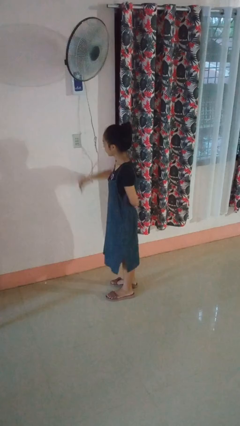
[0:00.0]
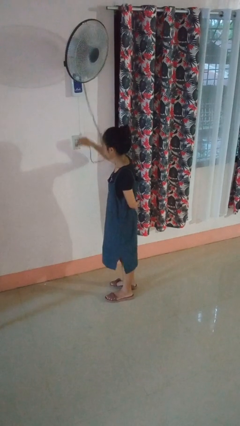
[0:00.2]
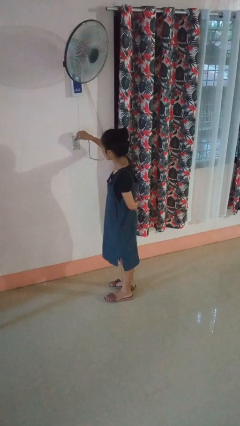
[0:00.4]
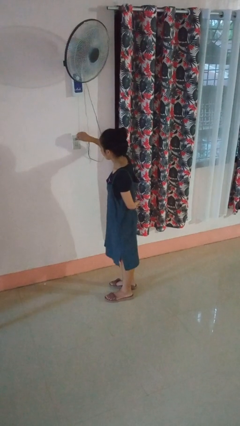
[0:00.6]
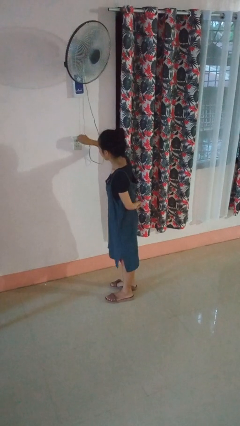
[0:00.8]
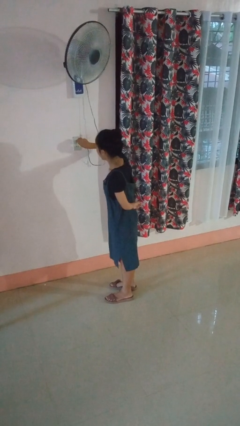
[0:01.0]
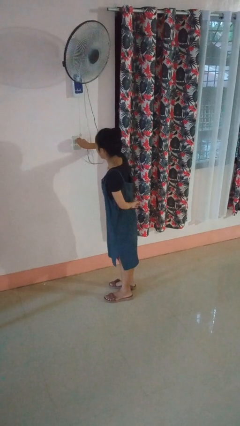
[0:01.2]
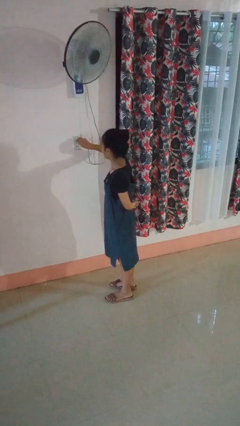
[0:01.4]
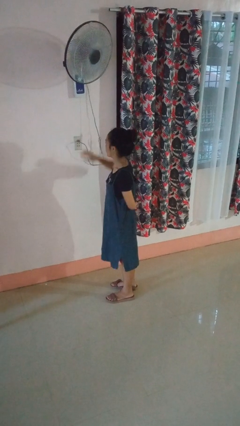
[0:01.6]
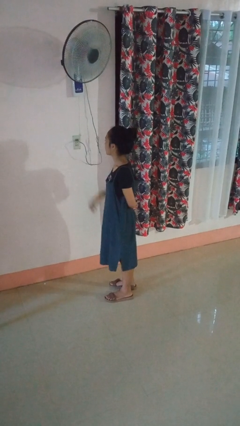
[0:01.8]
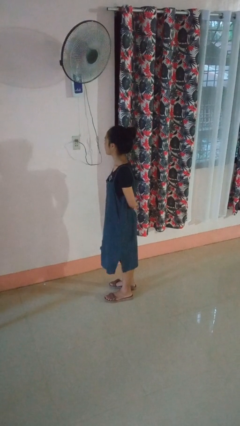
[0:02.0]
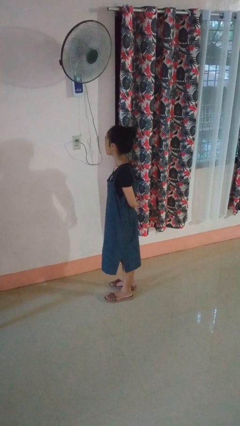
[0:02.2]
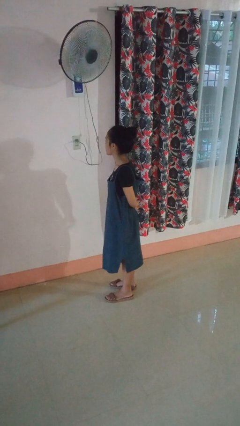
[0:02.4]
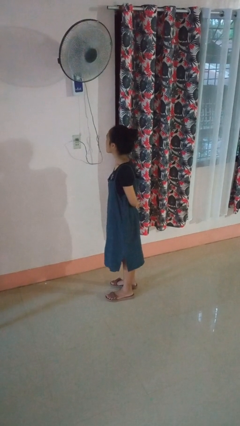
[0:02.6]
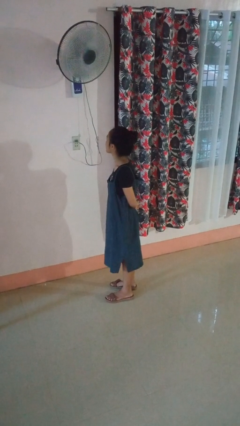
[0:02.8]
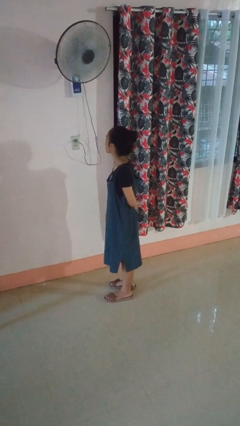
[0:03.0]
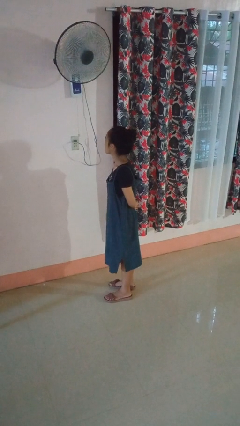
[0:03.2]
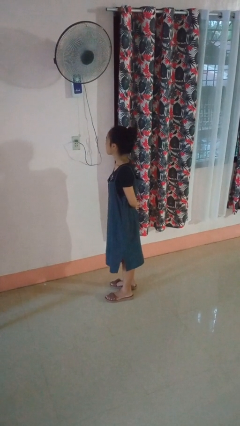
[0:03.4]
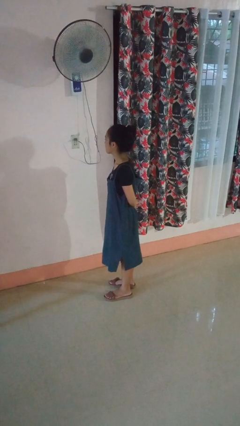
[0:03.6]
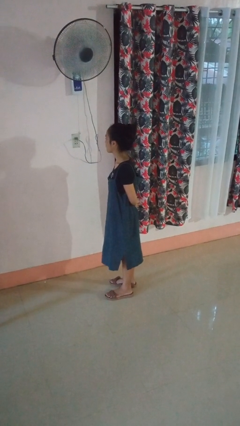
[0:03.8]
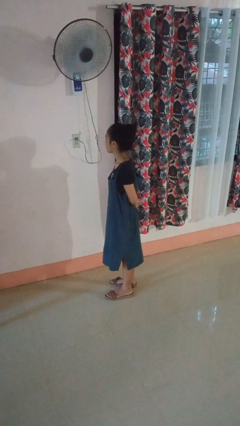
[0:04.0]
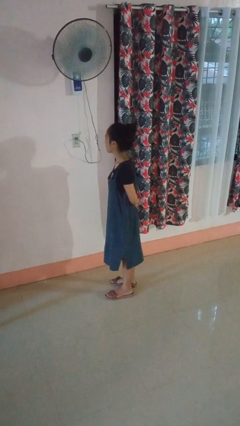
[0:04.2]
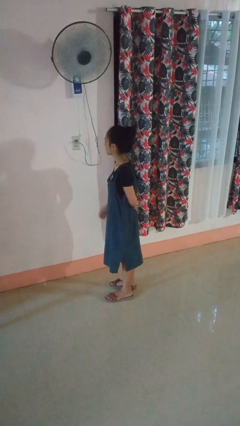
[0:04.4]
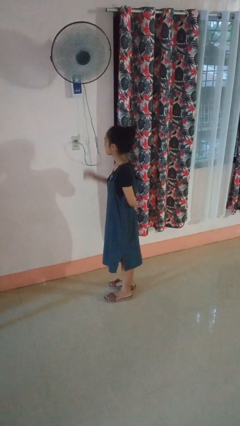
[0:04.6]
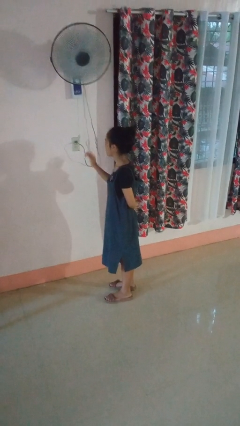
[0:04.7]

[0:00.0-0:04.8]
person plugs into electrical socket

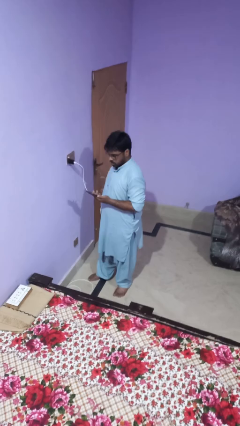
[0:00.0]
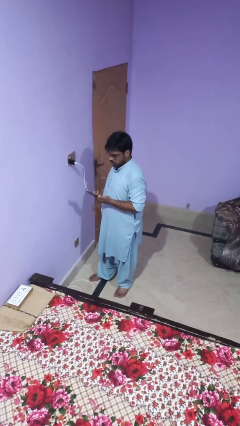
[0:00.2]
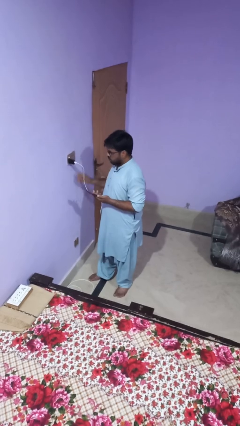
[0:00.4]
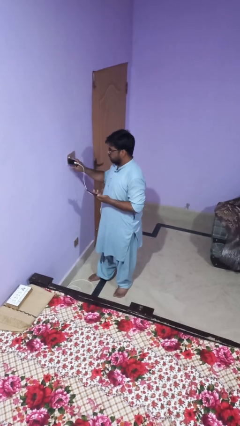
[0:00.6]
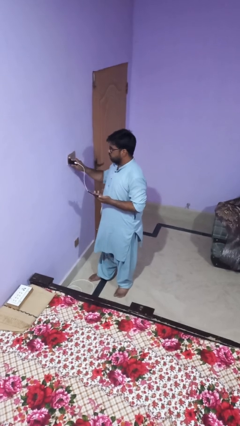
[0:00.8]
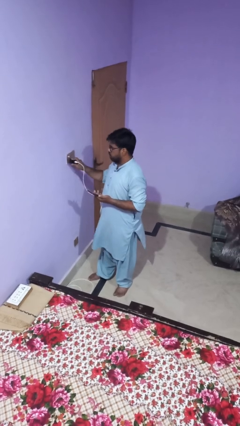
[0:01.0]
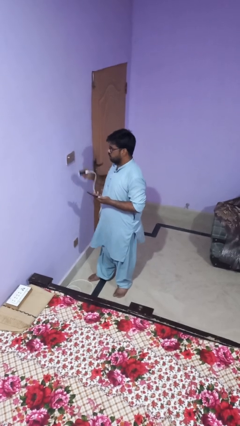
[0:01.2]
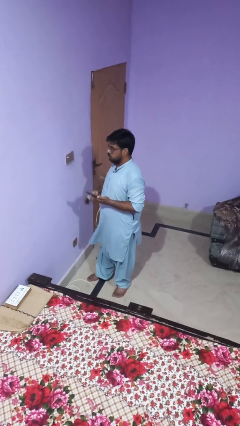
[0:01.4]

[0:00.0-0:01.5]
person unplugs from electrical socket

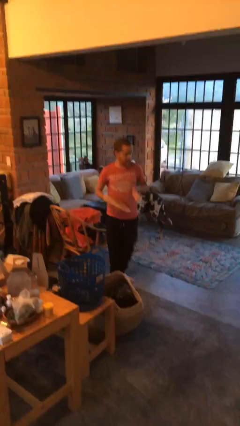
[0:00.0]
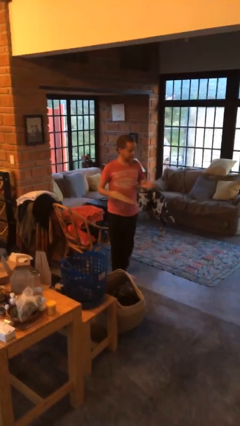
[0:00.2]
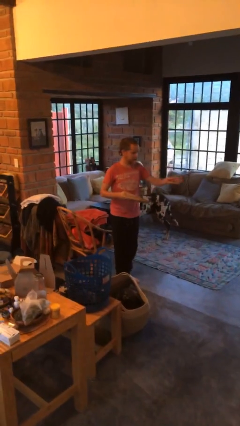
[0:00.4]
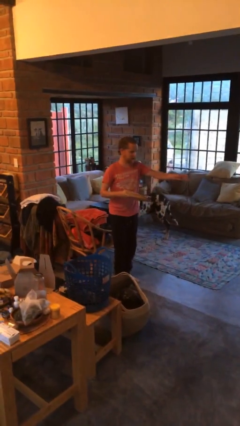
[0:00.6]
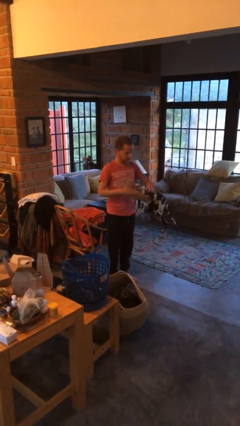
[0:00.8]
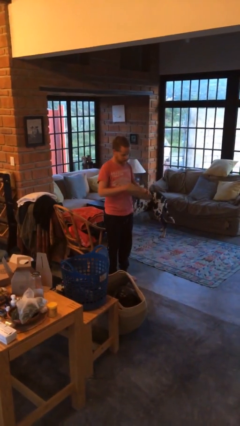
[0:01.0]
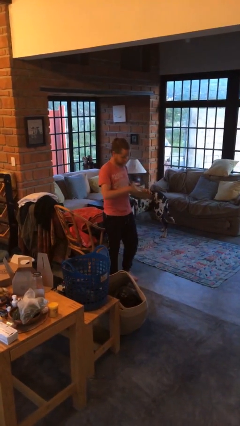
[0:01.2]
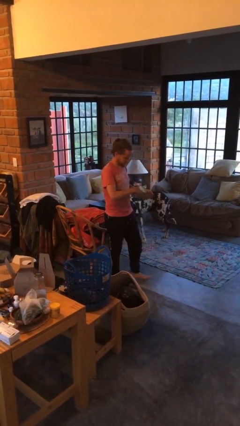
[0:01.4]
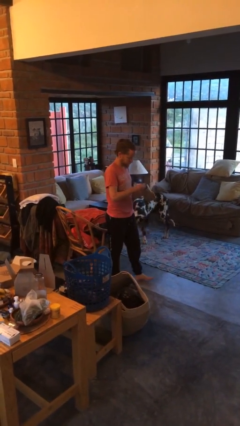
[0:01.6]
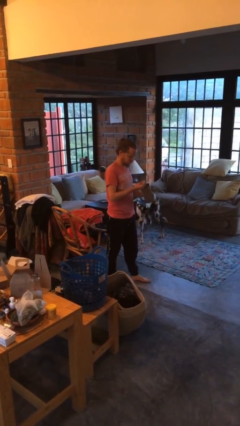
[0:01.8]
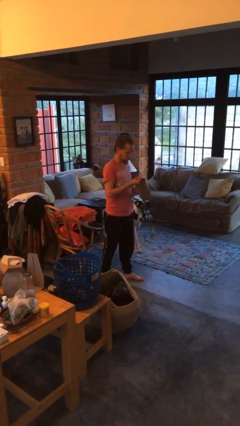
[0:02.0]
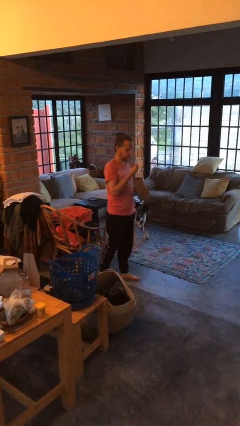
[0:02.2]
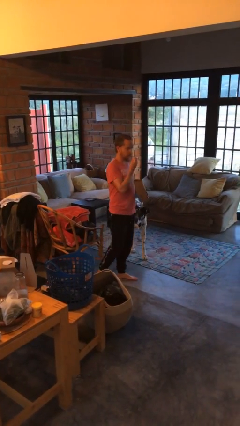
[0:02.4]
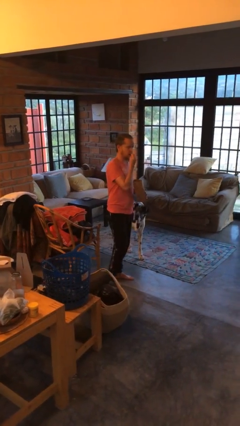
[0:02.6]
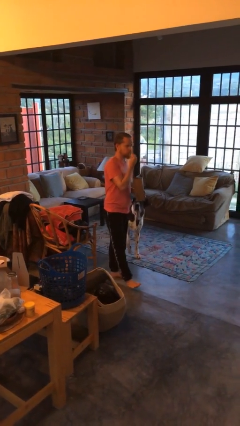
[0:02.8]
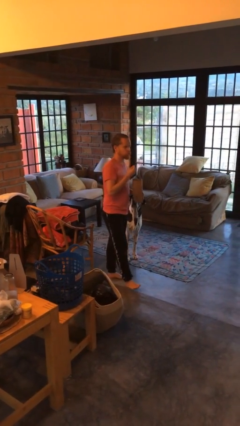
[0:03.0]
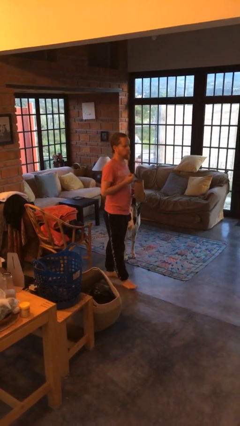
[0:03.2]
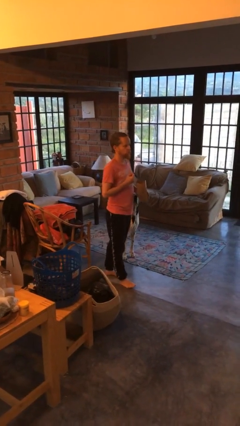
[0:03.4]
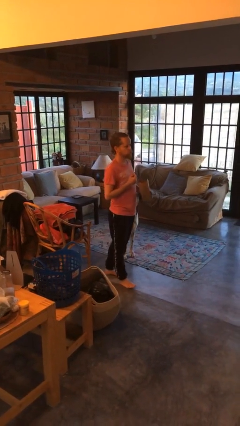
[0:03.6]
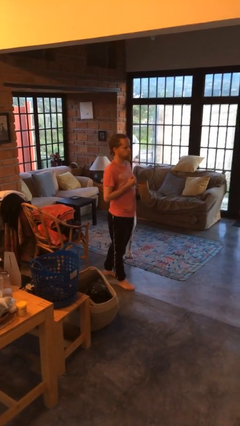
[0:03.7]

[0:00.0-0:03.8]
person eats snack from bag

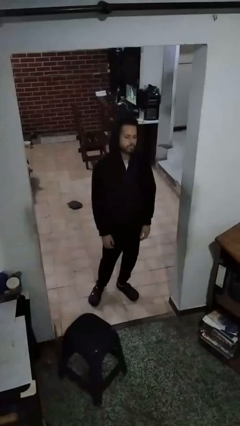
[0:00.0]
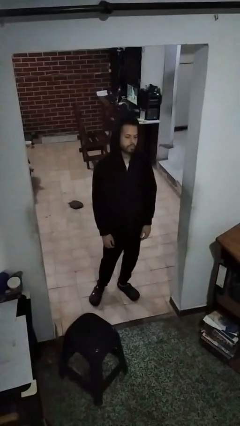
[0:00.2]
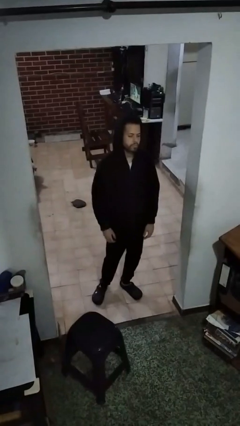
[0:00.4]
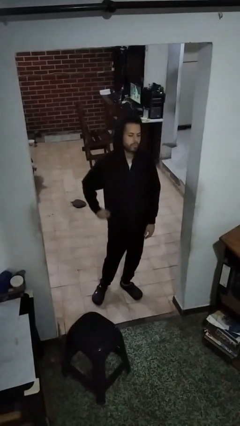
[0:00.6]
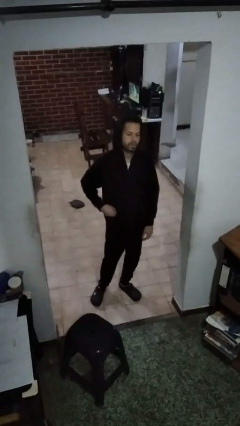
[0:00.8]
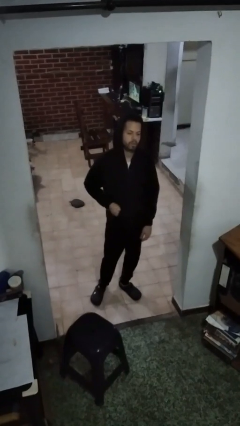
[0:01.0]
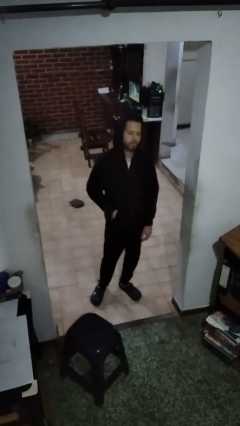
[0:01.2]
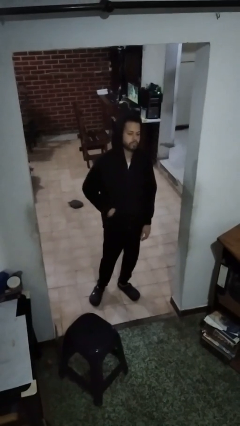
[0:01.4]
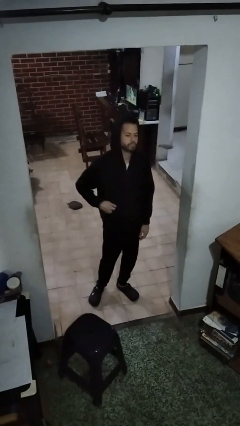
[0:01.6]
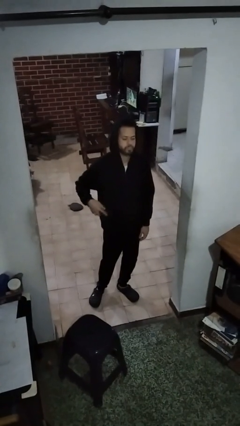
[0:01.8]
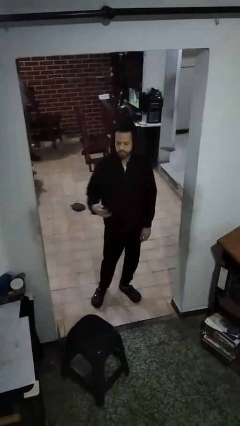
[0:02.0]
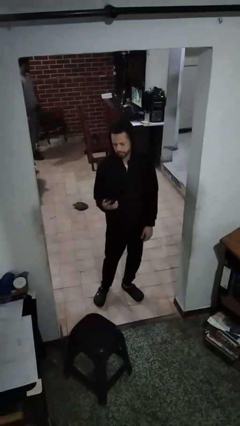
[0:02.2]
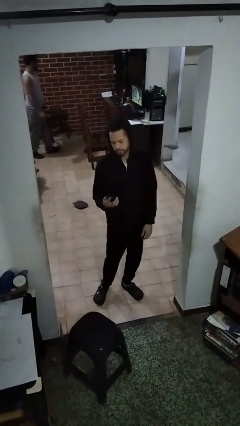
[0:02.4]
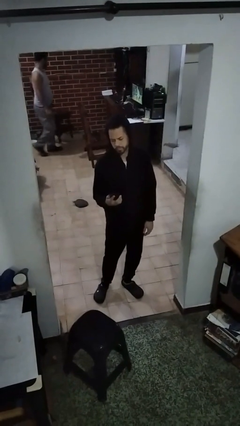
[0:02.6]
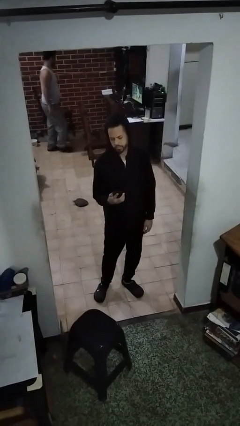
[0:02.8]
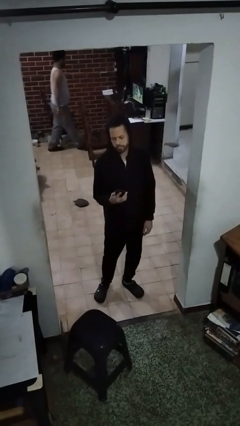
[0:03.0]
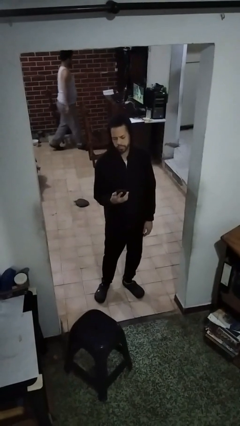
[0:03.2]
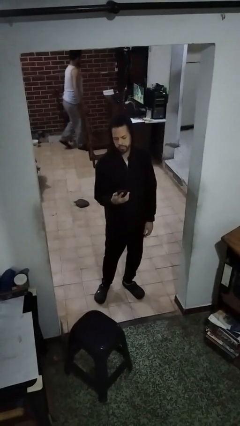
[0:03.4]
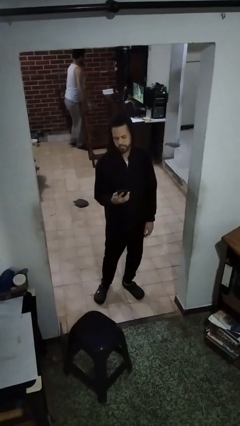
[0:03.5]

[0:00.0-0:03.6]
person takes phone from pocket

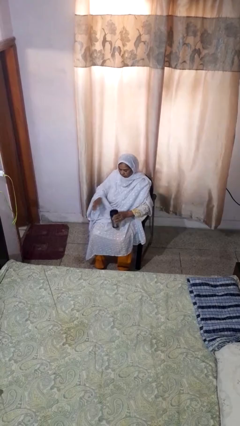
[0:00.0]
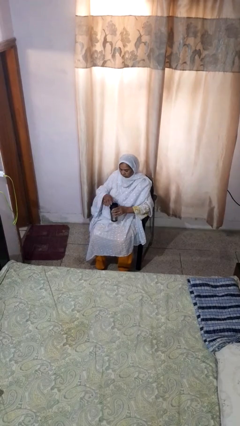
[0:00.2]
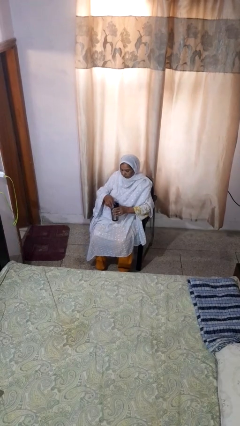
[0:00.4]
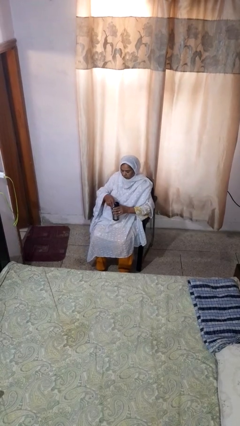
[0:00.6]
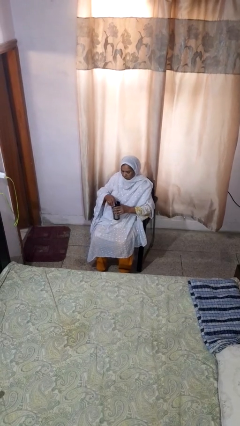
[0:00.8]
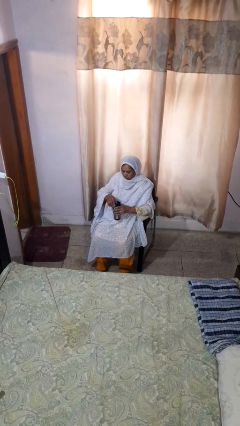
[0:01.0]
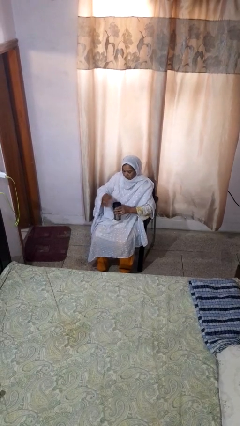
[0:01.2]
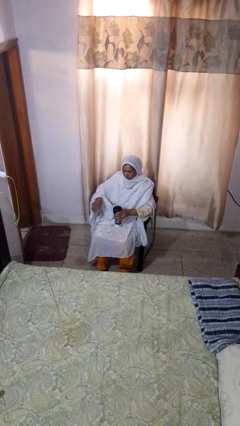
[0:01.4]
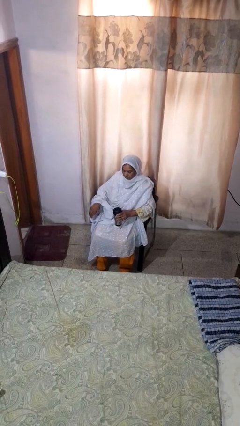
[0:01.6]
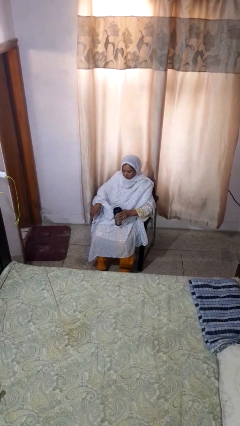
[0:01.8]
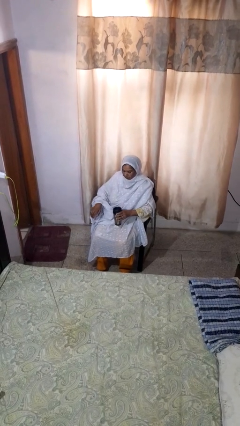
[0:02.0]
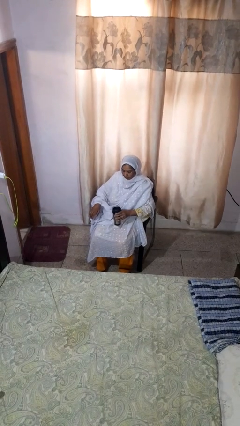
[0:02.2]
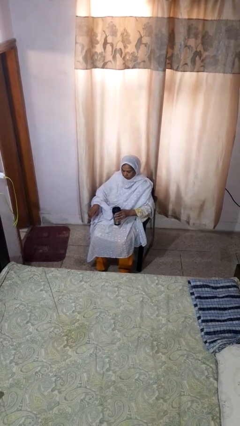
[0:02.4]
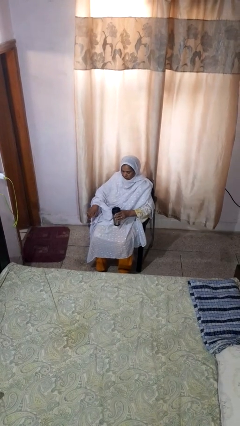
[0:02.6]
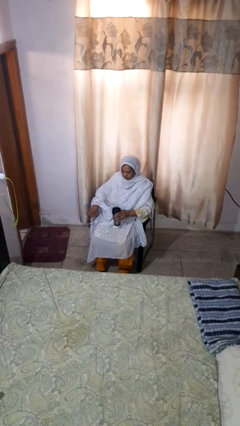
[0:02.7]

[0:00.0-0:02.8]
person opens beverage can

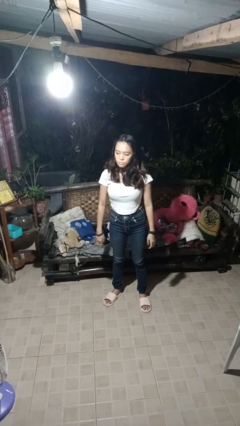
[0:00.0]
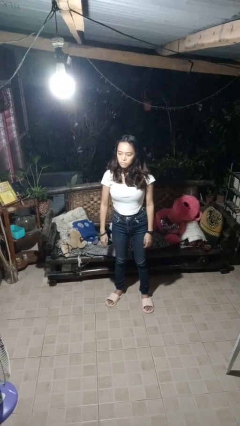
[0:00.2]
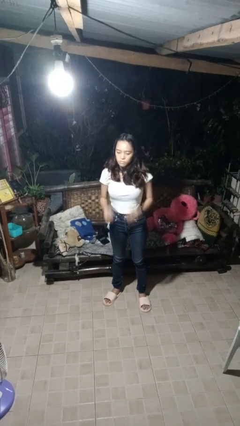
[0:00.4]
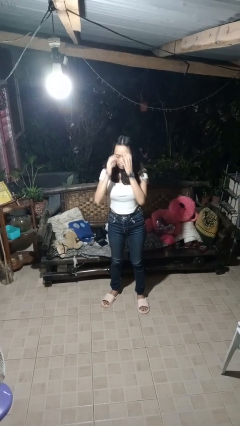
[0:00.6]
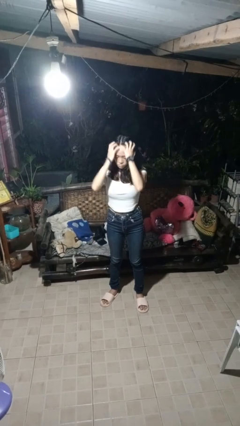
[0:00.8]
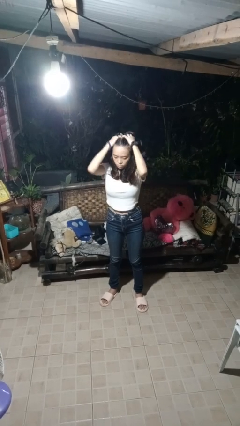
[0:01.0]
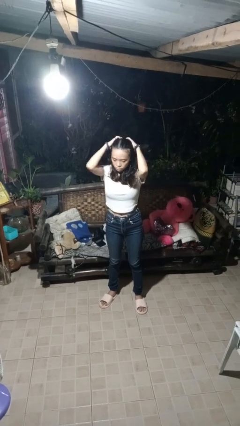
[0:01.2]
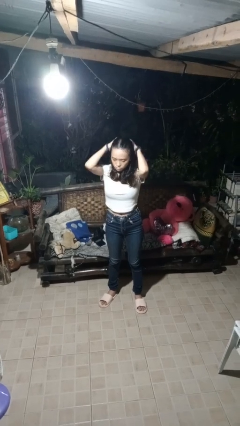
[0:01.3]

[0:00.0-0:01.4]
person strokes hair
